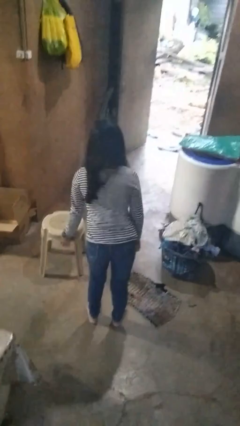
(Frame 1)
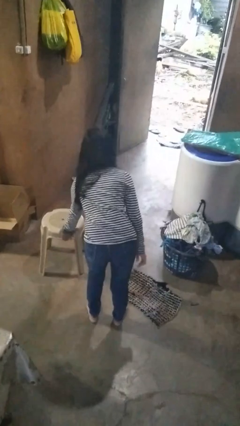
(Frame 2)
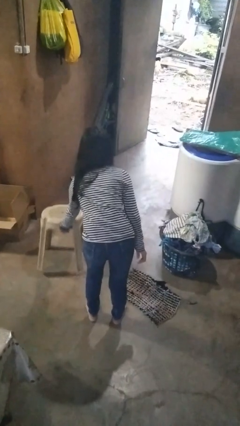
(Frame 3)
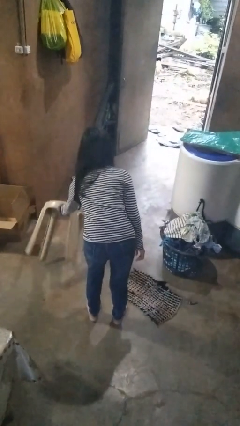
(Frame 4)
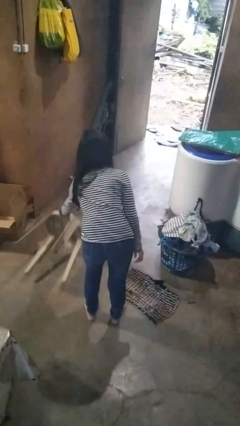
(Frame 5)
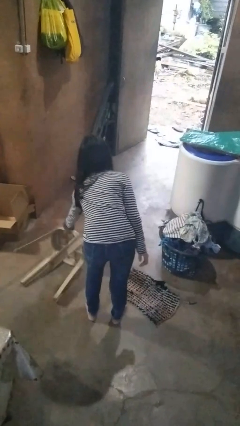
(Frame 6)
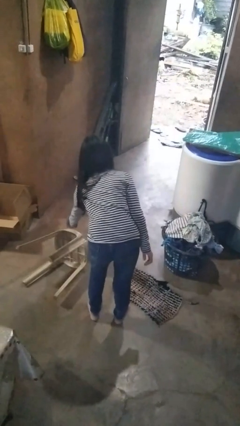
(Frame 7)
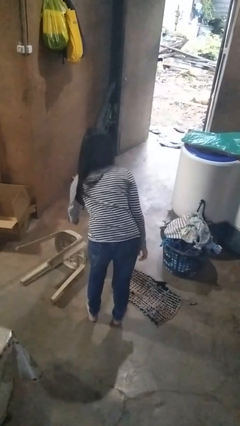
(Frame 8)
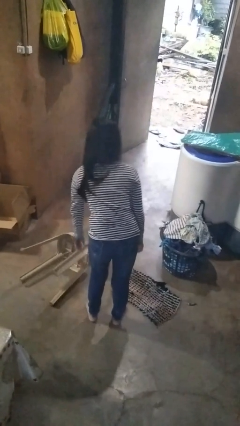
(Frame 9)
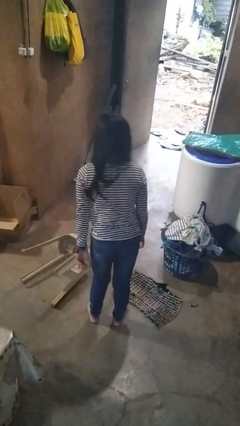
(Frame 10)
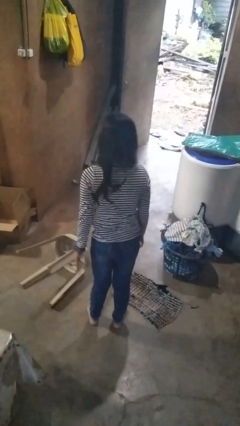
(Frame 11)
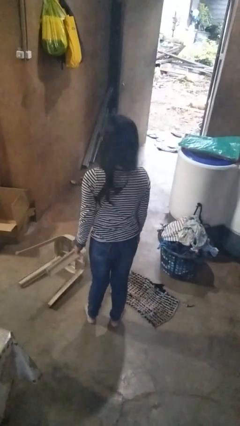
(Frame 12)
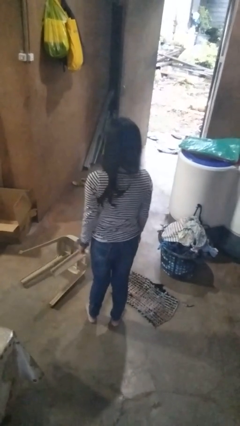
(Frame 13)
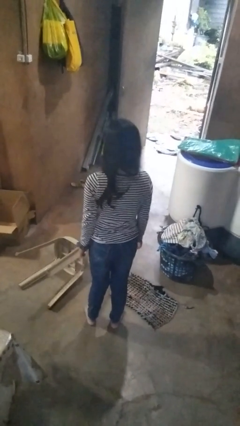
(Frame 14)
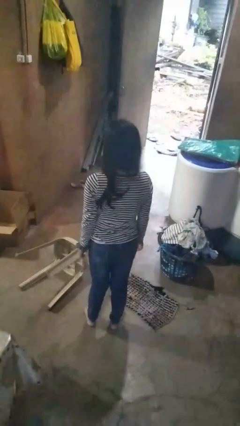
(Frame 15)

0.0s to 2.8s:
person knocks over furniture

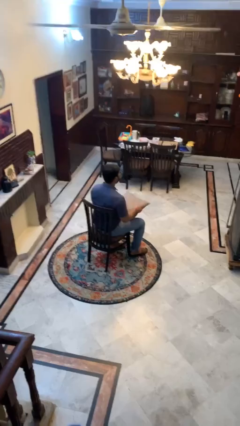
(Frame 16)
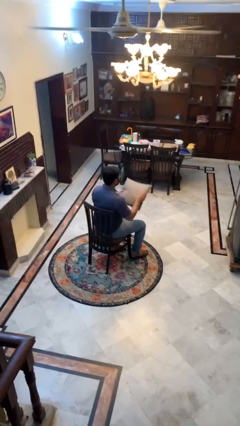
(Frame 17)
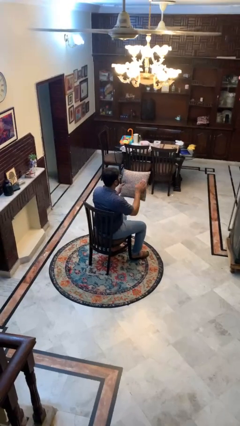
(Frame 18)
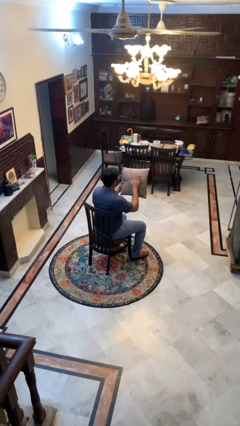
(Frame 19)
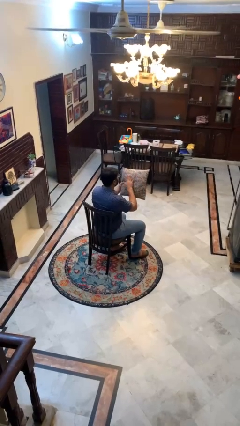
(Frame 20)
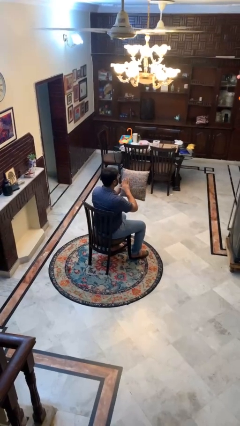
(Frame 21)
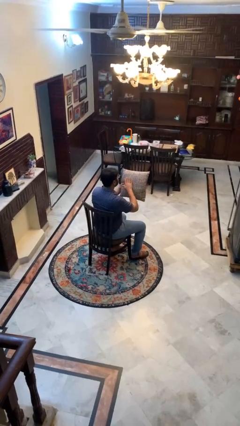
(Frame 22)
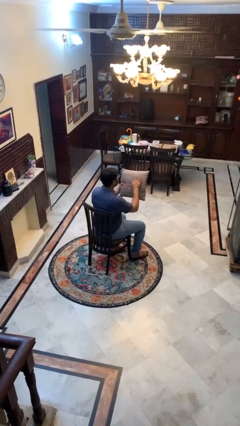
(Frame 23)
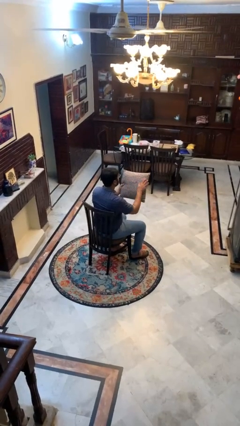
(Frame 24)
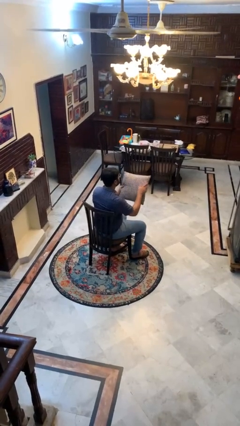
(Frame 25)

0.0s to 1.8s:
person waves hand over object

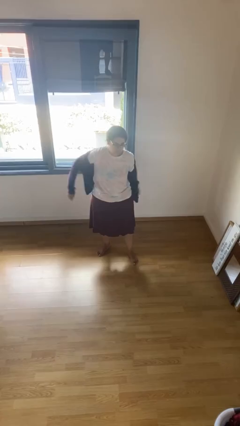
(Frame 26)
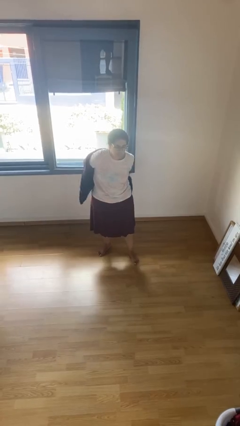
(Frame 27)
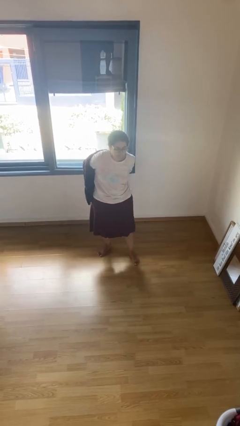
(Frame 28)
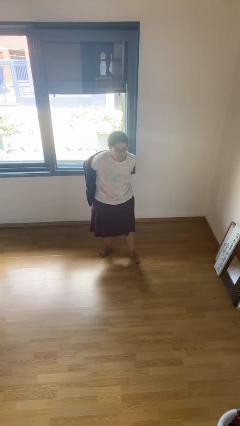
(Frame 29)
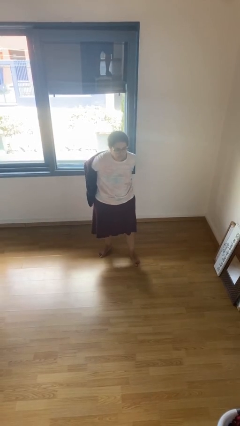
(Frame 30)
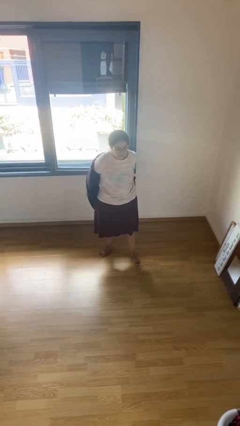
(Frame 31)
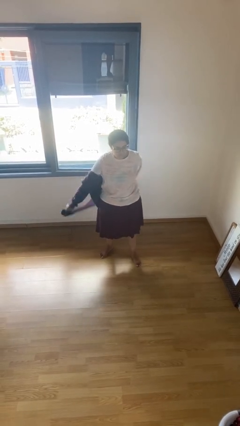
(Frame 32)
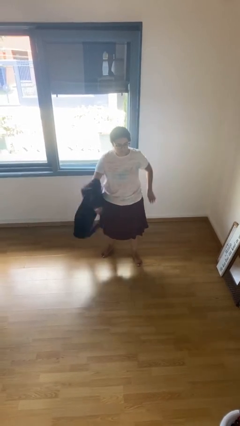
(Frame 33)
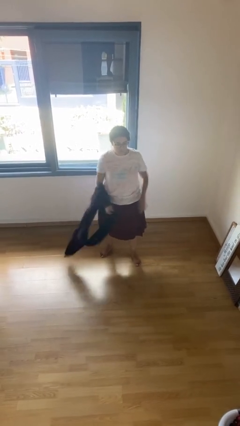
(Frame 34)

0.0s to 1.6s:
person takes off jacket

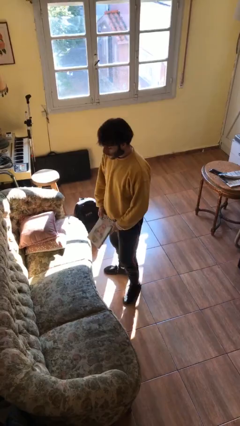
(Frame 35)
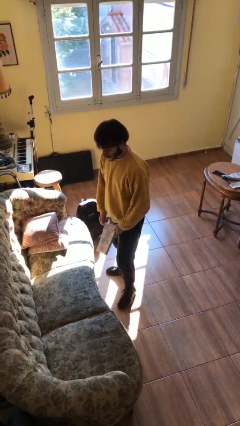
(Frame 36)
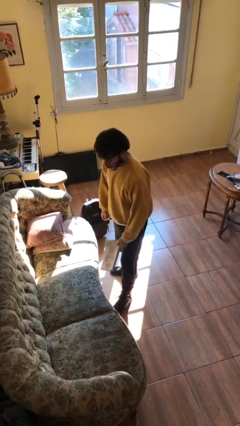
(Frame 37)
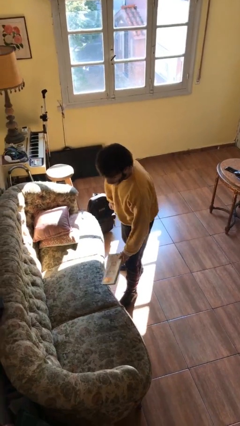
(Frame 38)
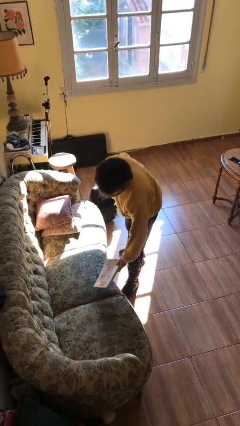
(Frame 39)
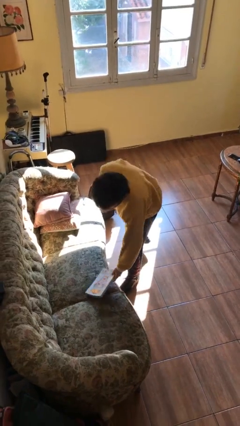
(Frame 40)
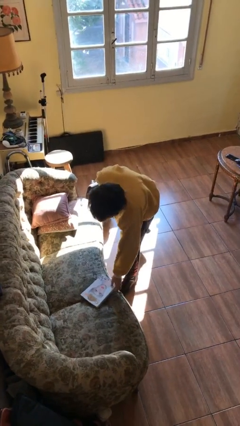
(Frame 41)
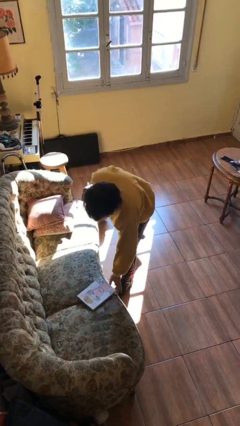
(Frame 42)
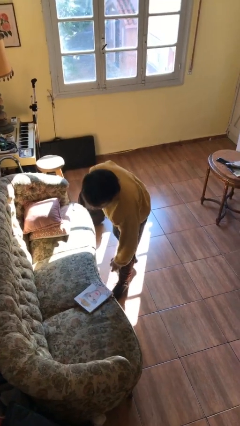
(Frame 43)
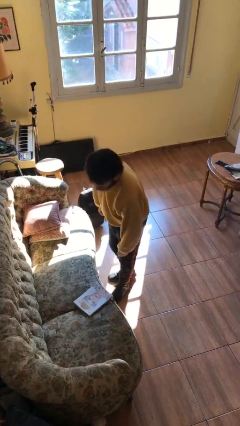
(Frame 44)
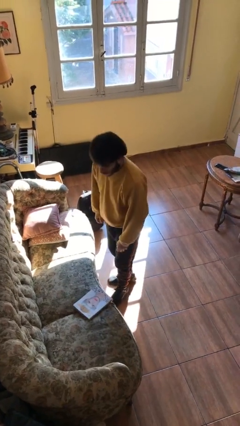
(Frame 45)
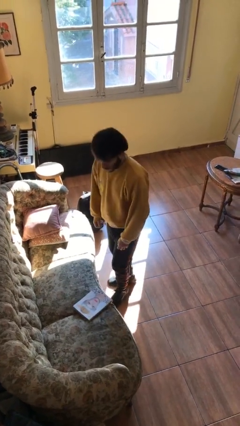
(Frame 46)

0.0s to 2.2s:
person puts down object on couch

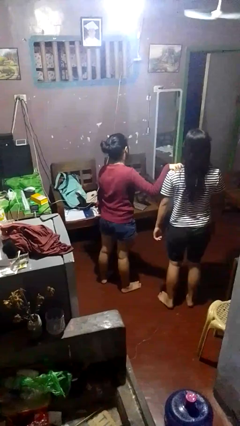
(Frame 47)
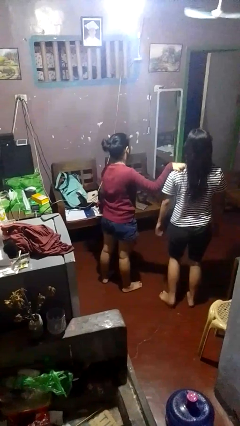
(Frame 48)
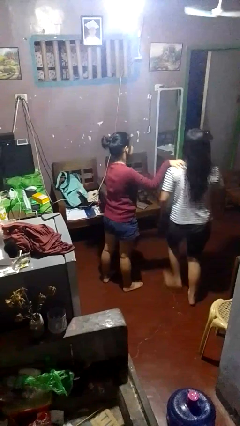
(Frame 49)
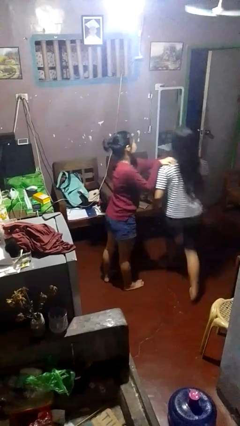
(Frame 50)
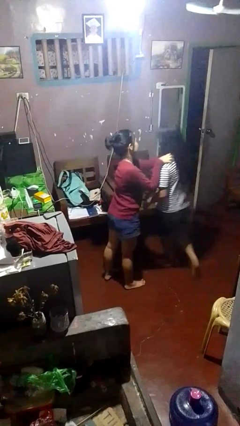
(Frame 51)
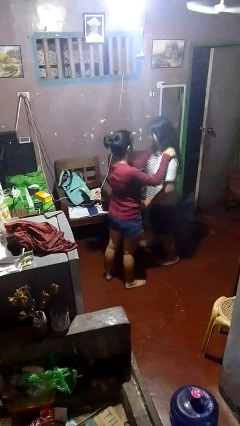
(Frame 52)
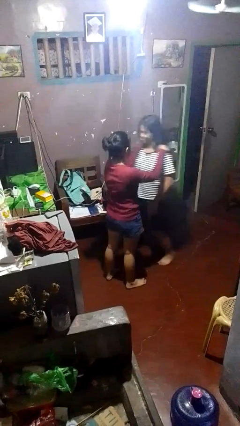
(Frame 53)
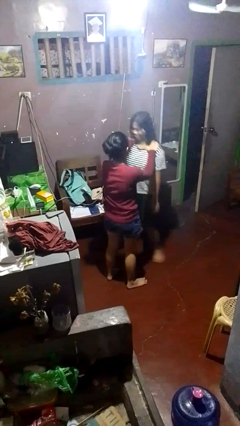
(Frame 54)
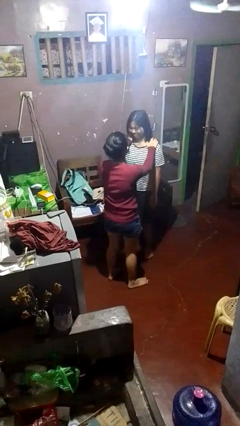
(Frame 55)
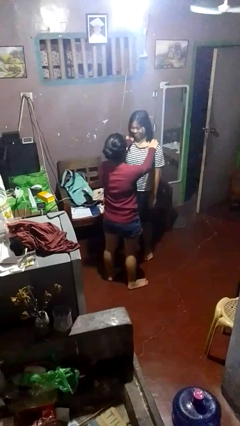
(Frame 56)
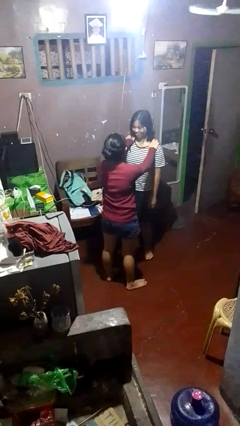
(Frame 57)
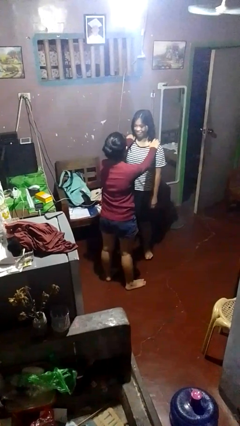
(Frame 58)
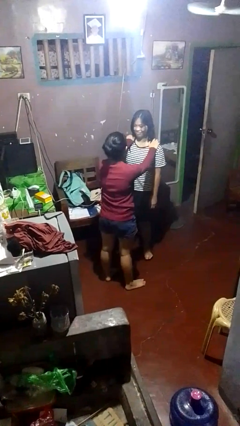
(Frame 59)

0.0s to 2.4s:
person spins person around

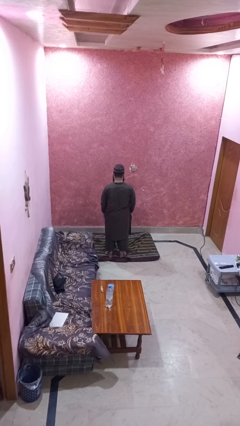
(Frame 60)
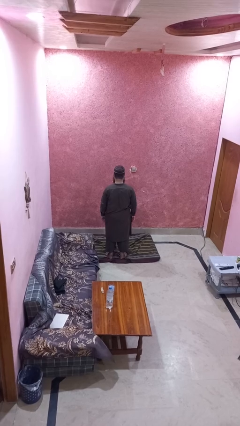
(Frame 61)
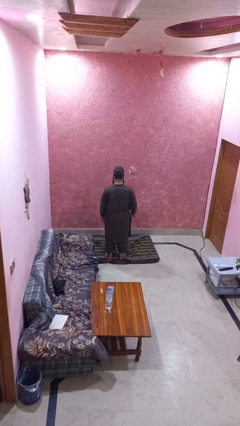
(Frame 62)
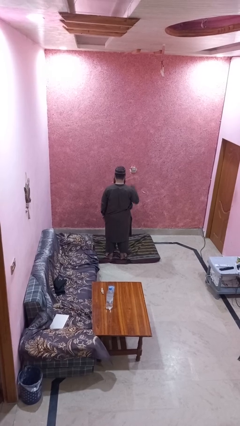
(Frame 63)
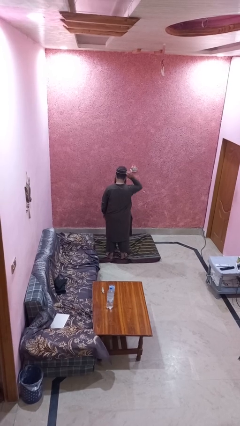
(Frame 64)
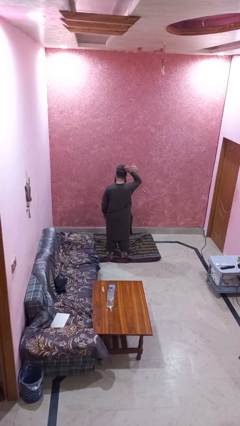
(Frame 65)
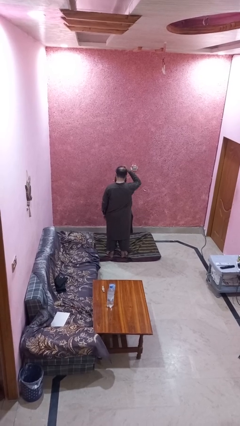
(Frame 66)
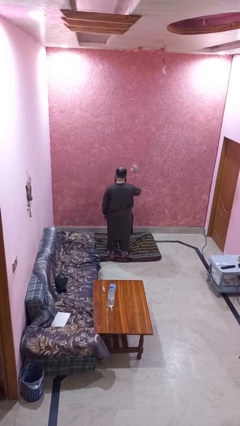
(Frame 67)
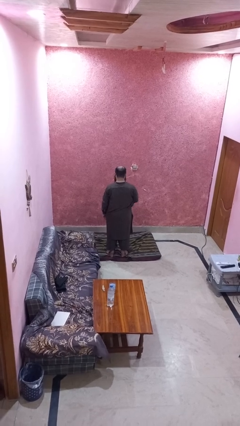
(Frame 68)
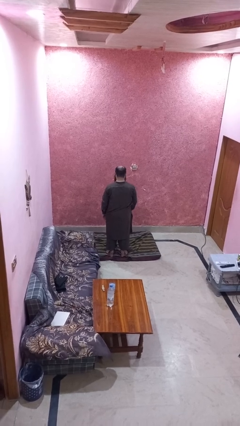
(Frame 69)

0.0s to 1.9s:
person takes off hat

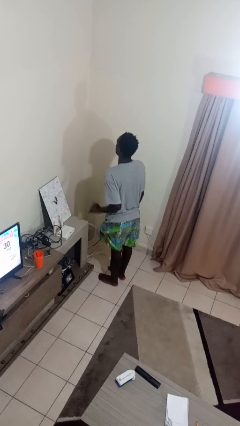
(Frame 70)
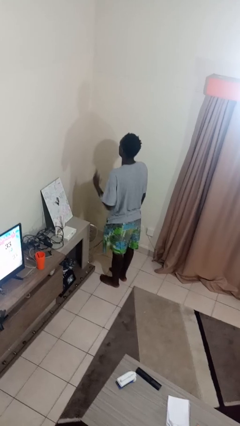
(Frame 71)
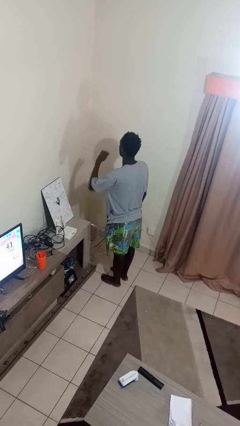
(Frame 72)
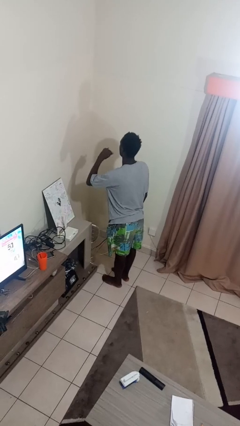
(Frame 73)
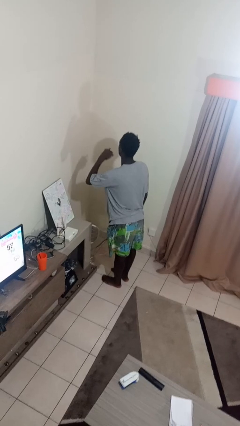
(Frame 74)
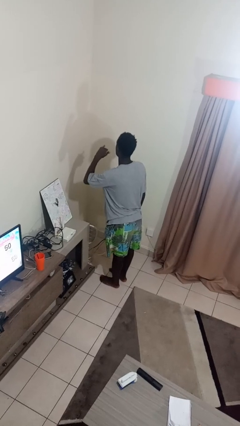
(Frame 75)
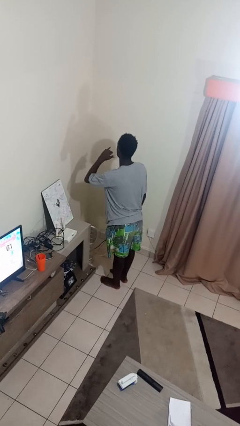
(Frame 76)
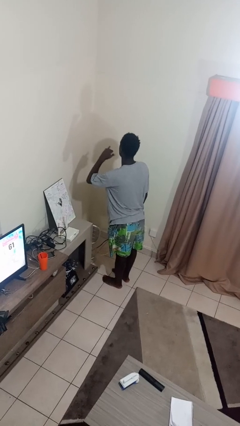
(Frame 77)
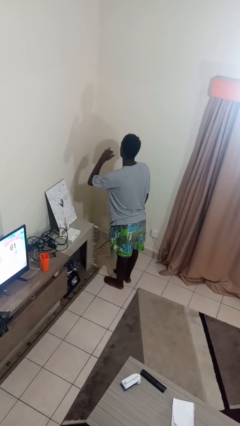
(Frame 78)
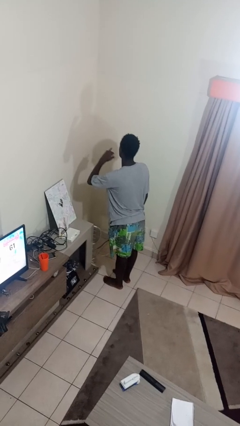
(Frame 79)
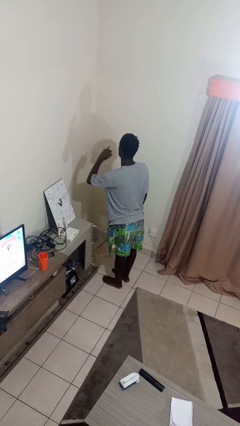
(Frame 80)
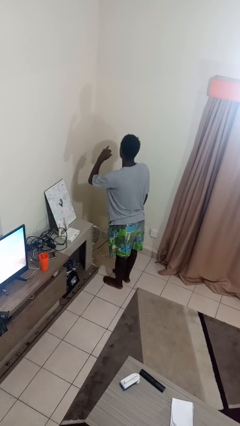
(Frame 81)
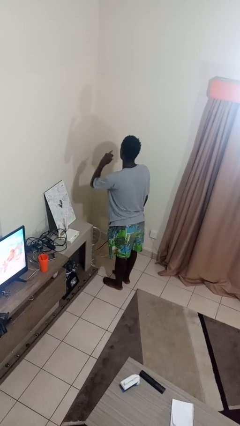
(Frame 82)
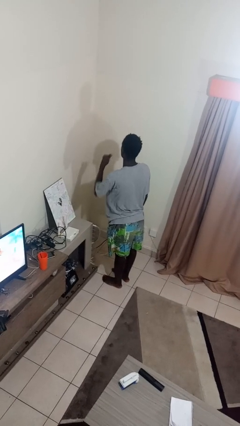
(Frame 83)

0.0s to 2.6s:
person gestures call me

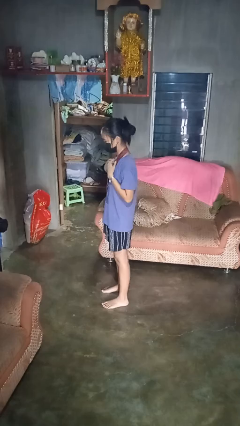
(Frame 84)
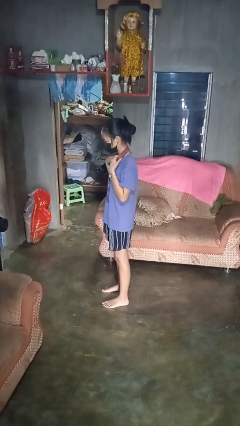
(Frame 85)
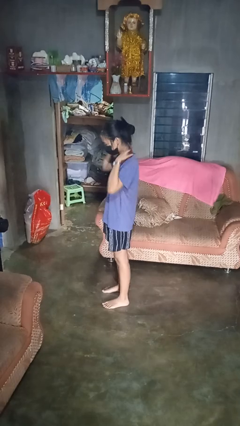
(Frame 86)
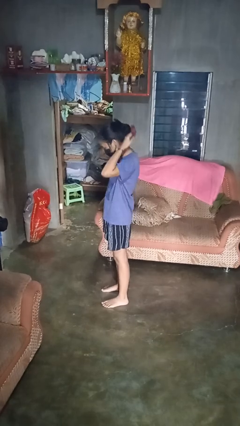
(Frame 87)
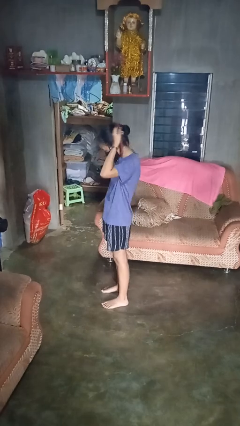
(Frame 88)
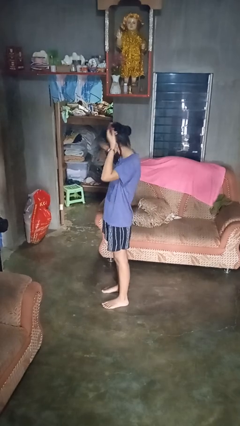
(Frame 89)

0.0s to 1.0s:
person takes off necklace
